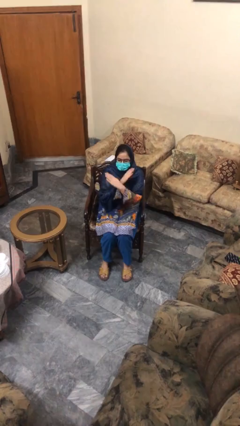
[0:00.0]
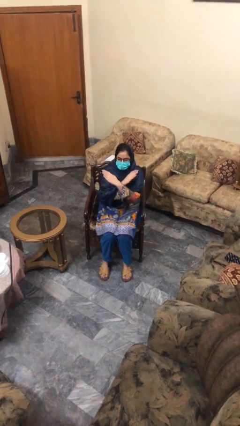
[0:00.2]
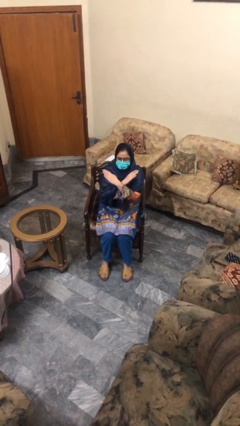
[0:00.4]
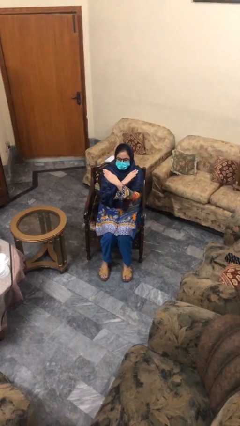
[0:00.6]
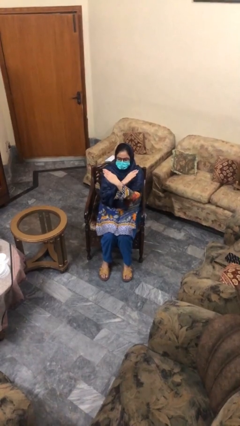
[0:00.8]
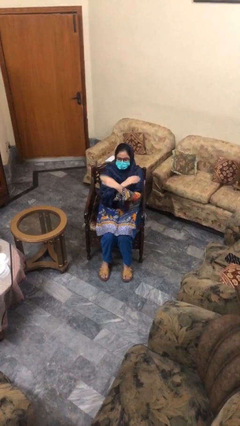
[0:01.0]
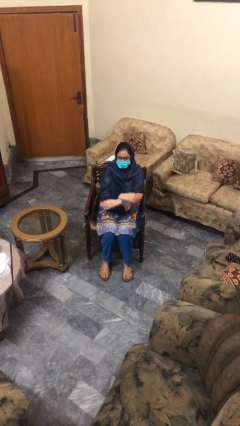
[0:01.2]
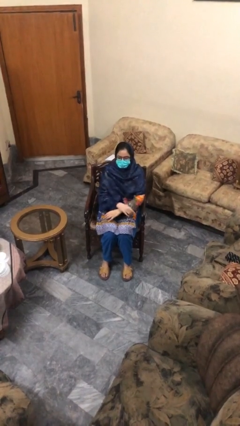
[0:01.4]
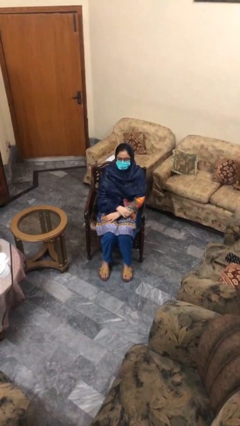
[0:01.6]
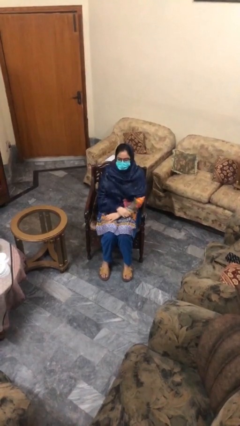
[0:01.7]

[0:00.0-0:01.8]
person gestures arms x

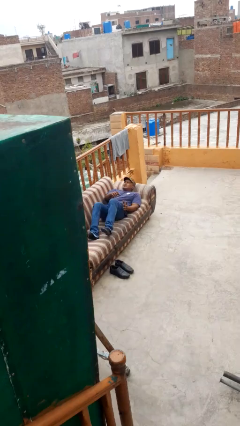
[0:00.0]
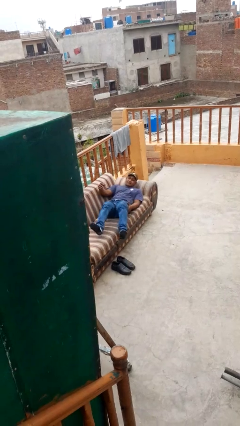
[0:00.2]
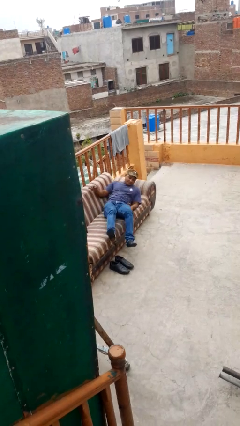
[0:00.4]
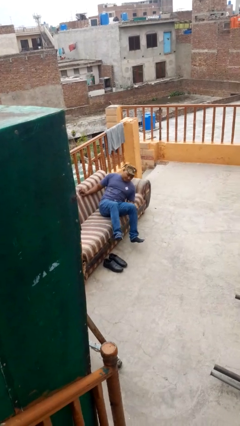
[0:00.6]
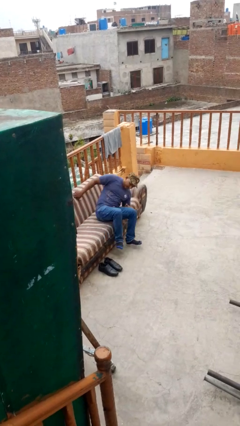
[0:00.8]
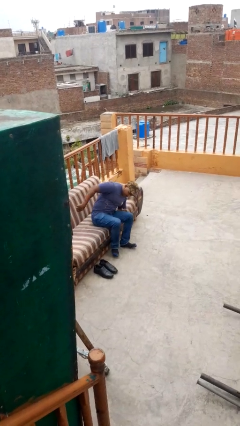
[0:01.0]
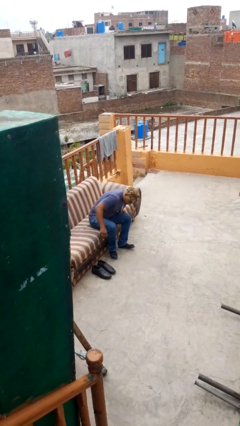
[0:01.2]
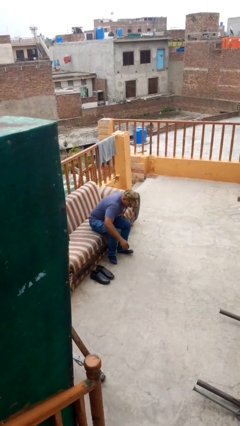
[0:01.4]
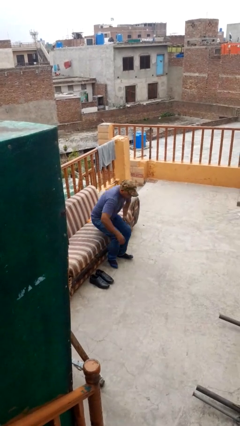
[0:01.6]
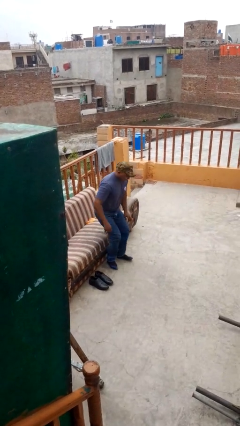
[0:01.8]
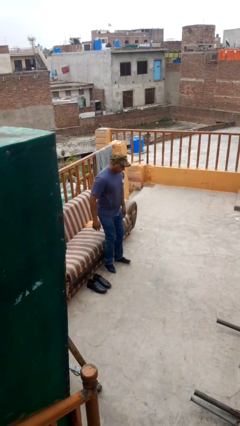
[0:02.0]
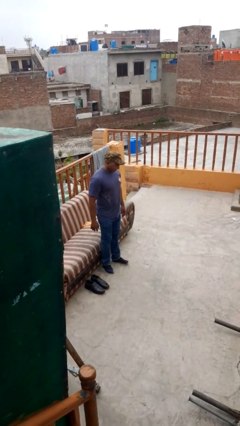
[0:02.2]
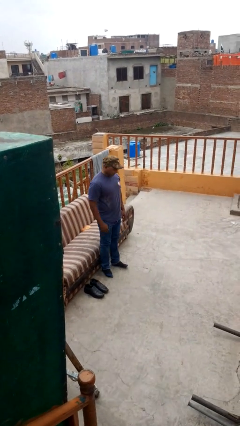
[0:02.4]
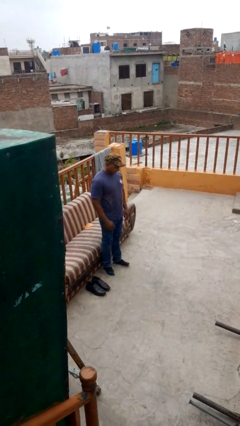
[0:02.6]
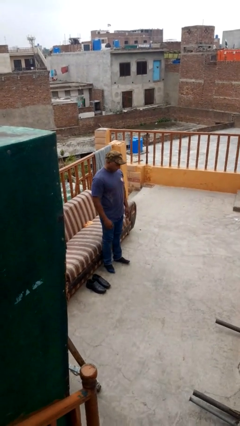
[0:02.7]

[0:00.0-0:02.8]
person stands up

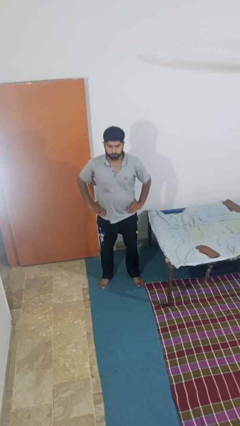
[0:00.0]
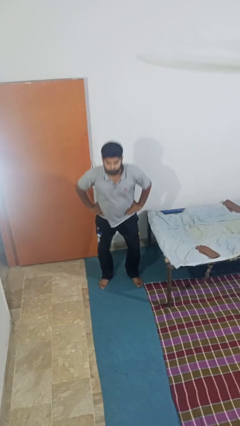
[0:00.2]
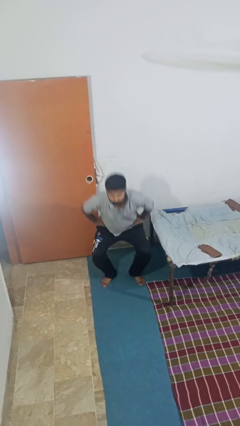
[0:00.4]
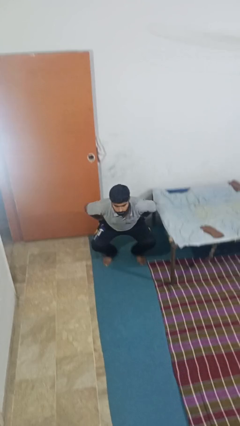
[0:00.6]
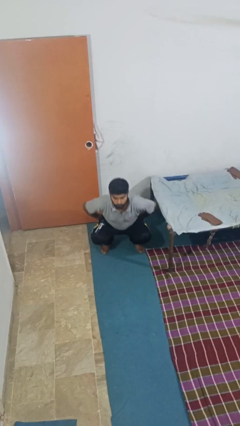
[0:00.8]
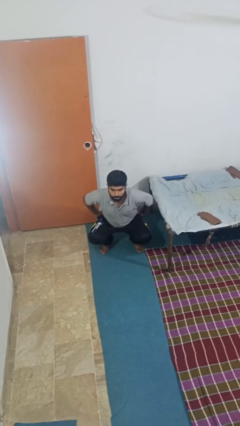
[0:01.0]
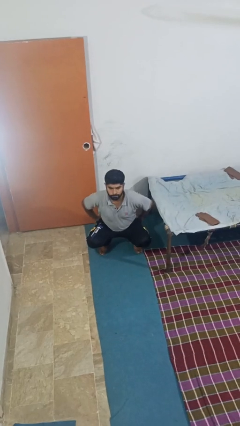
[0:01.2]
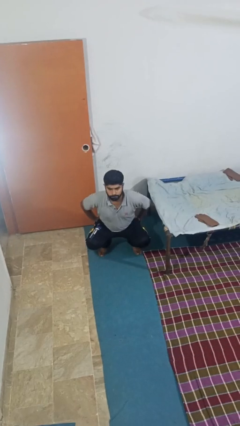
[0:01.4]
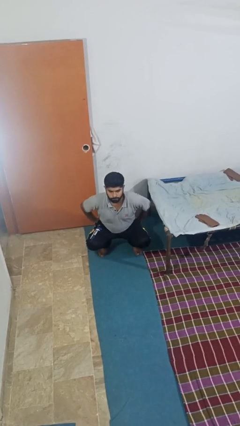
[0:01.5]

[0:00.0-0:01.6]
person squats

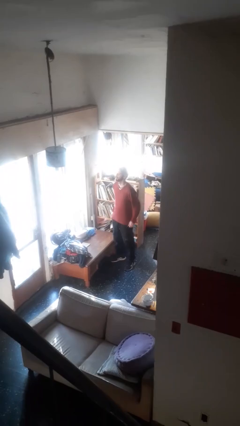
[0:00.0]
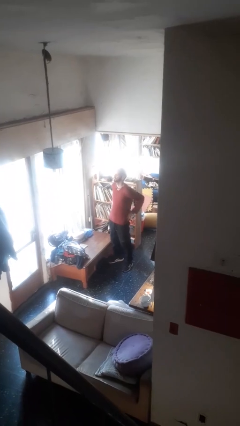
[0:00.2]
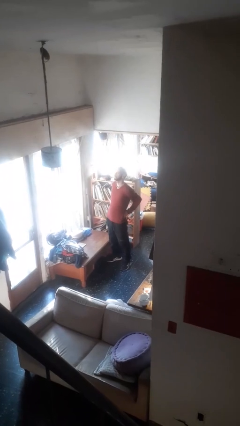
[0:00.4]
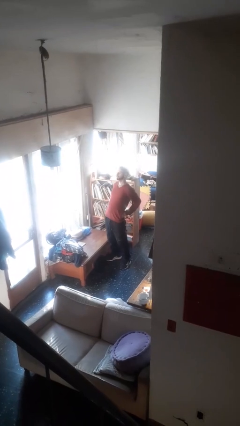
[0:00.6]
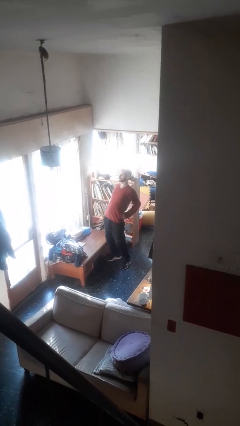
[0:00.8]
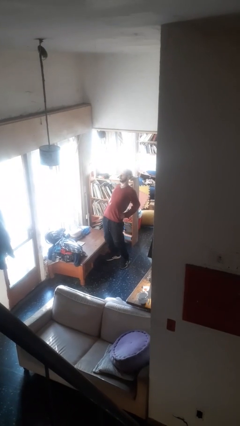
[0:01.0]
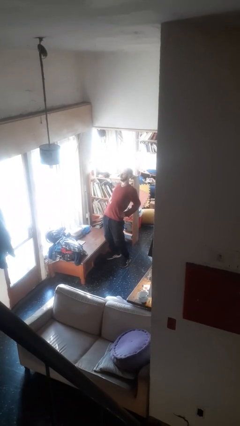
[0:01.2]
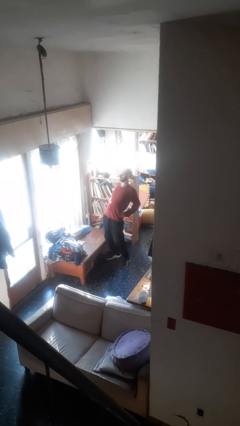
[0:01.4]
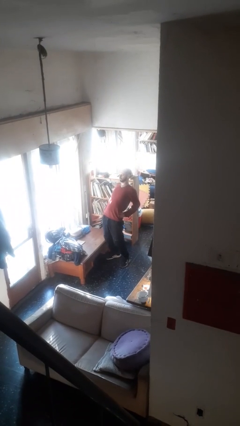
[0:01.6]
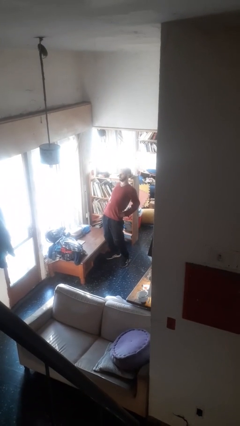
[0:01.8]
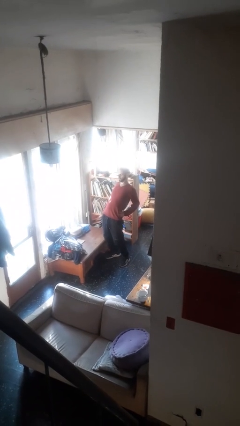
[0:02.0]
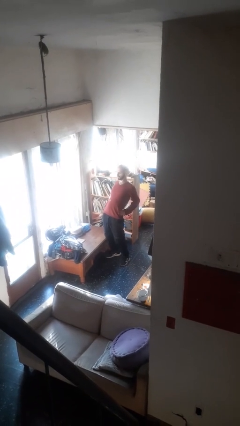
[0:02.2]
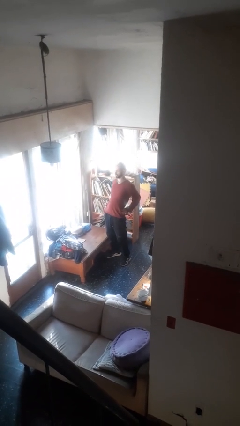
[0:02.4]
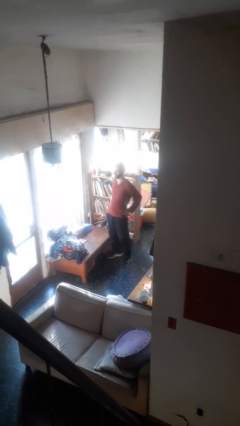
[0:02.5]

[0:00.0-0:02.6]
person stretches back

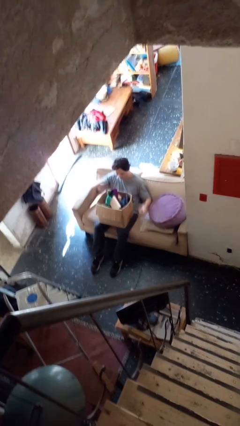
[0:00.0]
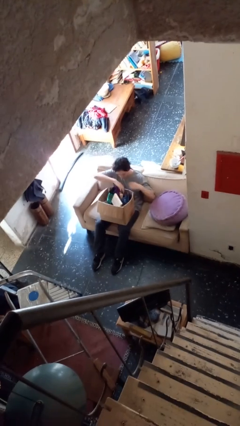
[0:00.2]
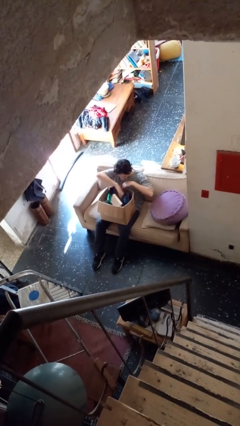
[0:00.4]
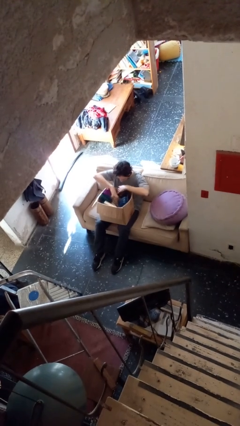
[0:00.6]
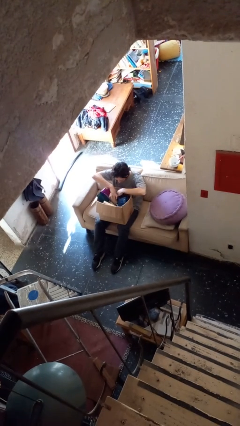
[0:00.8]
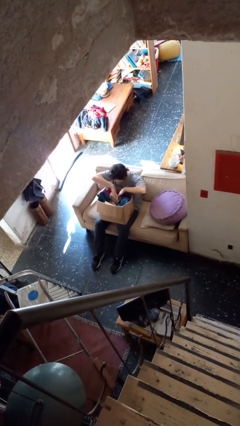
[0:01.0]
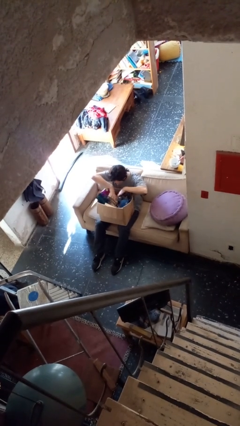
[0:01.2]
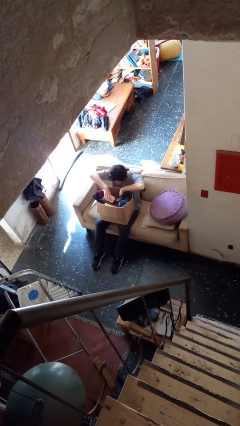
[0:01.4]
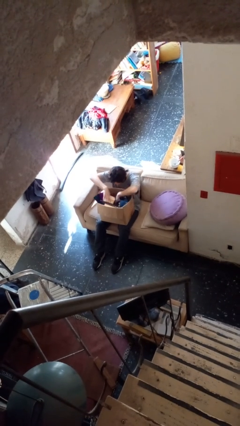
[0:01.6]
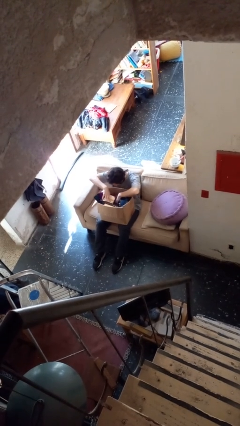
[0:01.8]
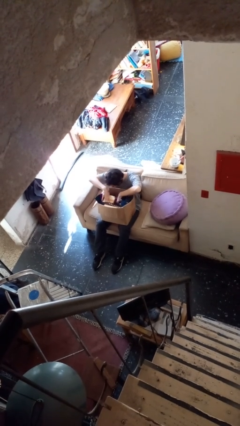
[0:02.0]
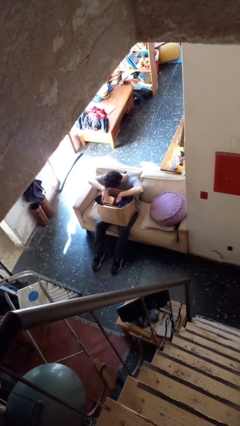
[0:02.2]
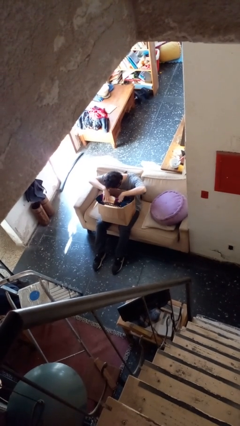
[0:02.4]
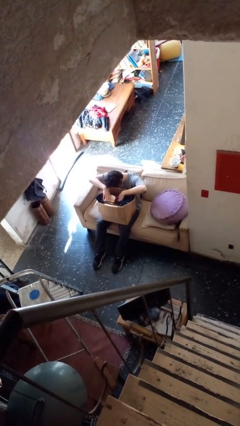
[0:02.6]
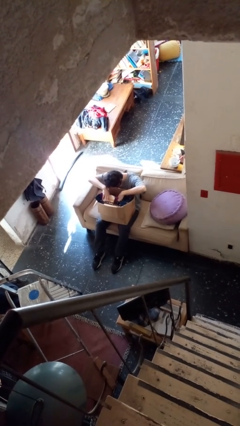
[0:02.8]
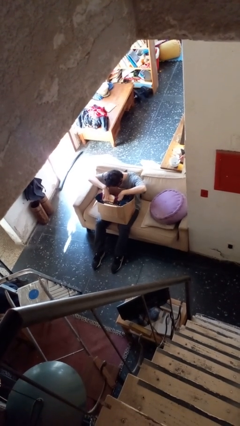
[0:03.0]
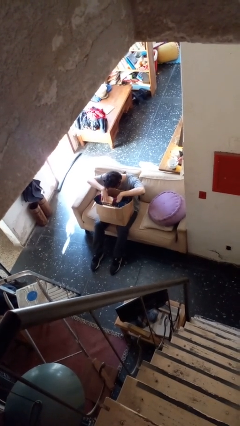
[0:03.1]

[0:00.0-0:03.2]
person searches in box

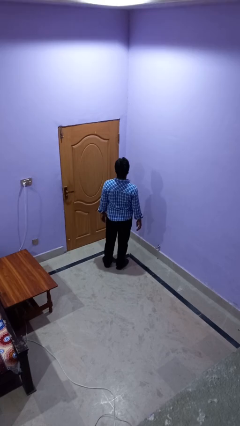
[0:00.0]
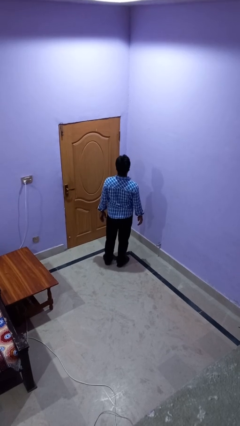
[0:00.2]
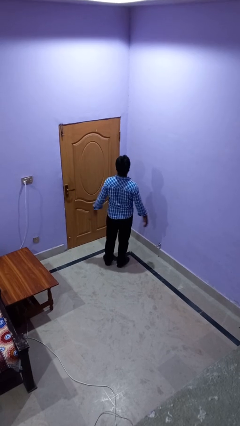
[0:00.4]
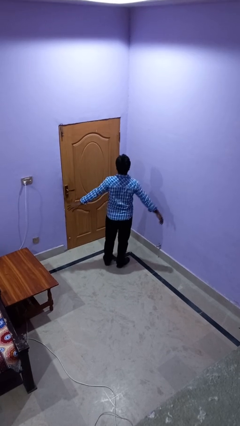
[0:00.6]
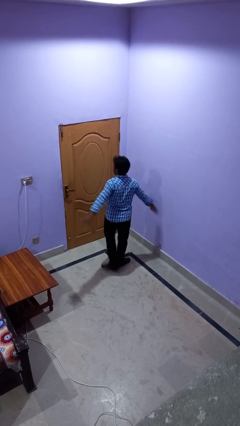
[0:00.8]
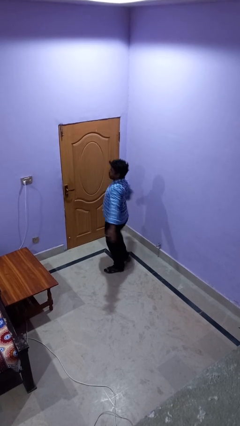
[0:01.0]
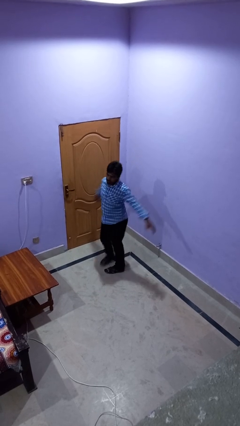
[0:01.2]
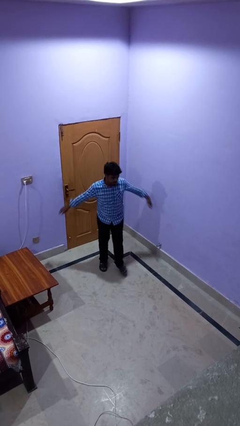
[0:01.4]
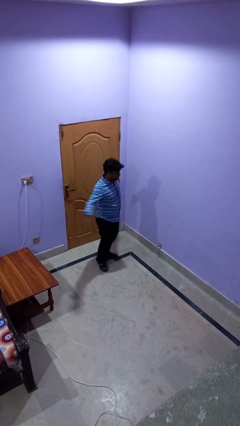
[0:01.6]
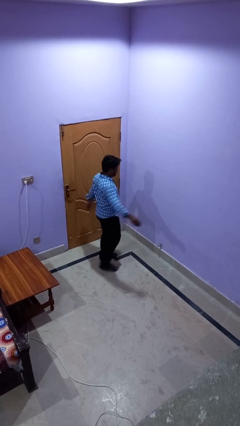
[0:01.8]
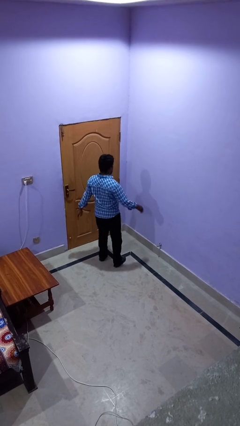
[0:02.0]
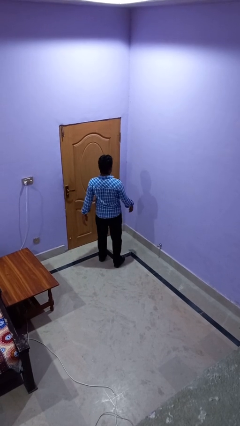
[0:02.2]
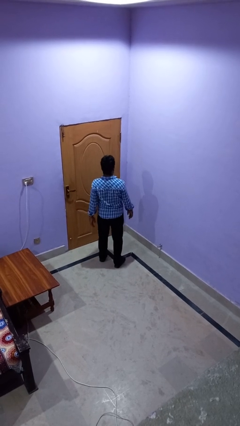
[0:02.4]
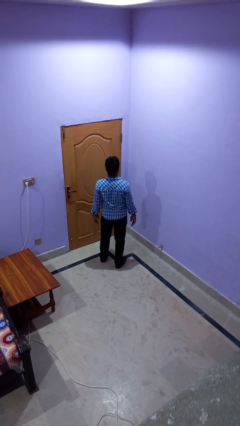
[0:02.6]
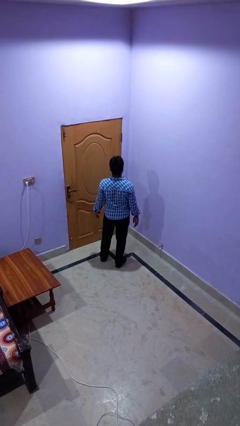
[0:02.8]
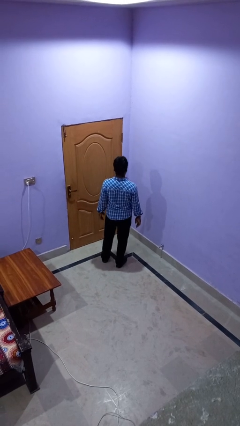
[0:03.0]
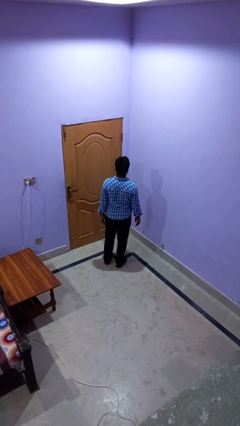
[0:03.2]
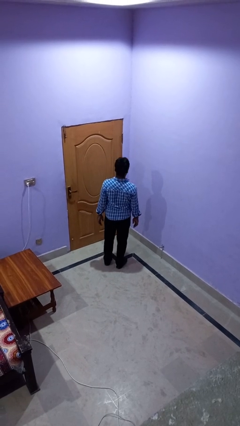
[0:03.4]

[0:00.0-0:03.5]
person twirls

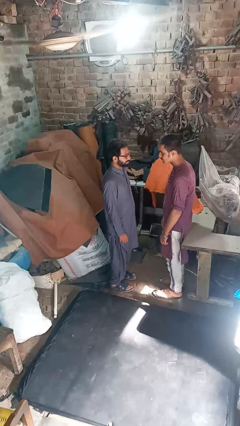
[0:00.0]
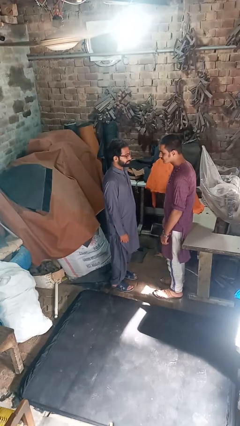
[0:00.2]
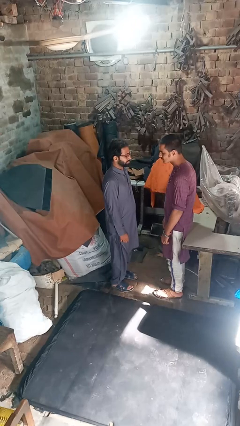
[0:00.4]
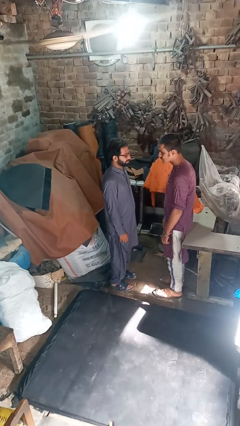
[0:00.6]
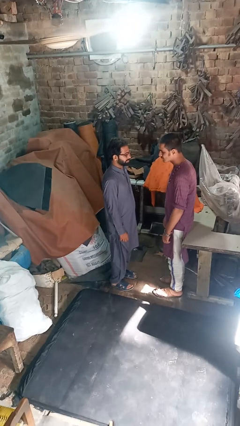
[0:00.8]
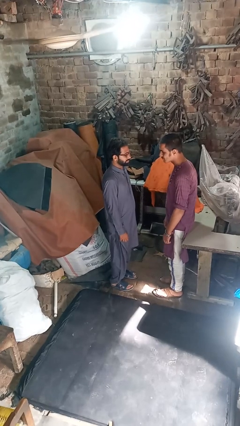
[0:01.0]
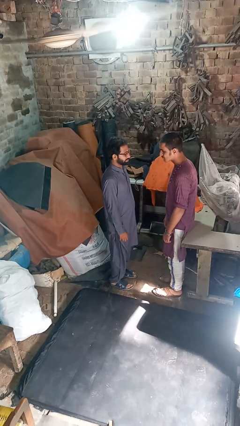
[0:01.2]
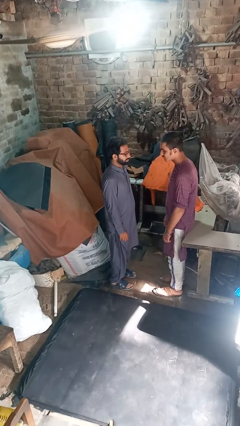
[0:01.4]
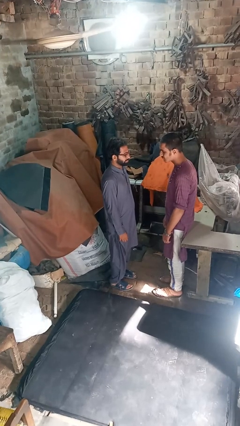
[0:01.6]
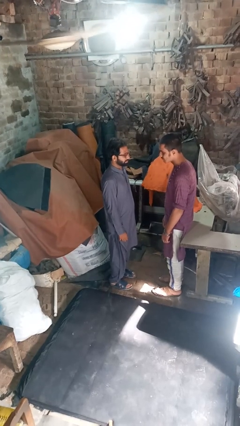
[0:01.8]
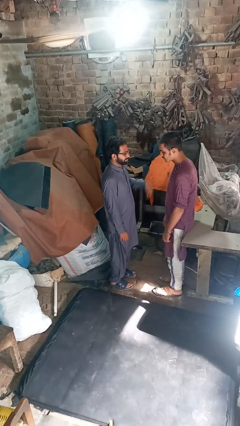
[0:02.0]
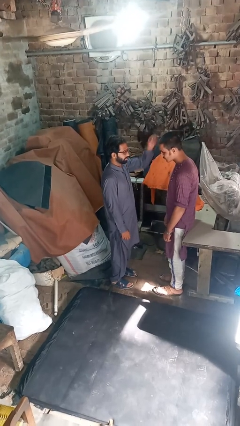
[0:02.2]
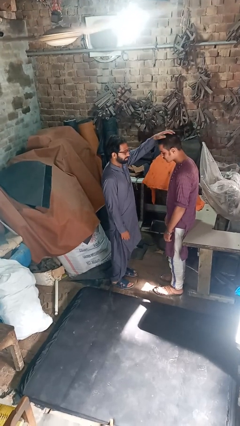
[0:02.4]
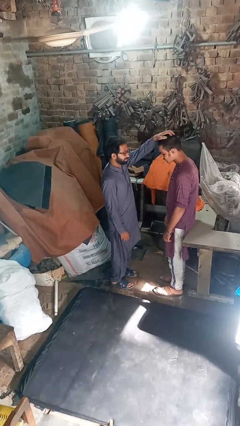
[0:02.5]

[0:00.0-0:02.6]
person grabs person by hair
